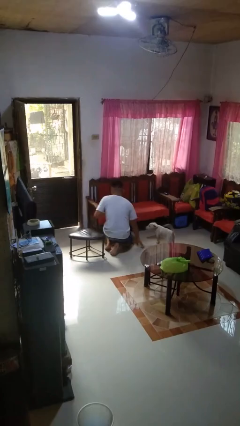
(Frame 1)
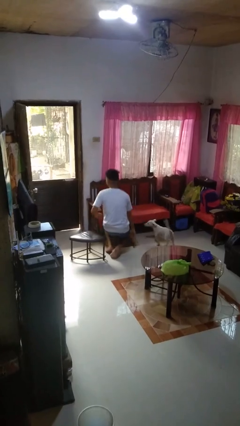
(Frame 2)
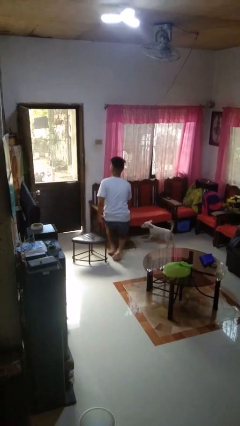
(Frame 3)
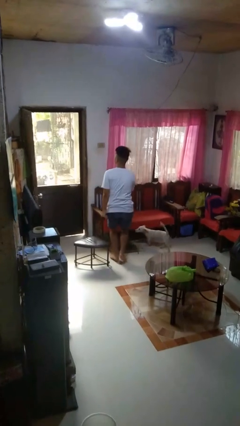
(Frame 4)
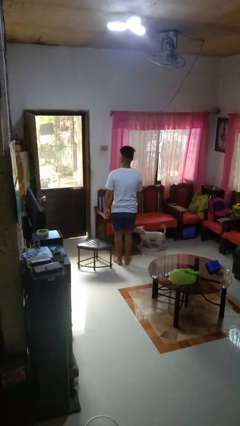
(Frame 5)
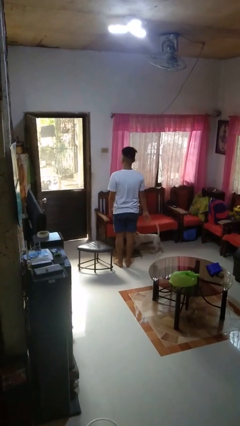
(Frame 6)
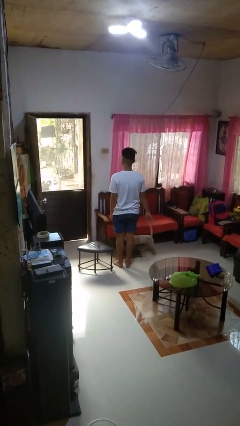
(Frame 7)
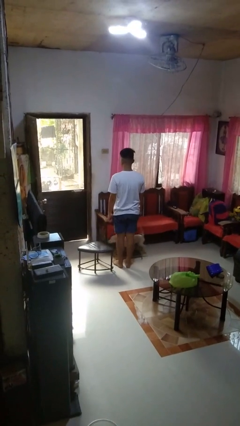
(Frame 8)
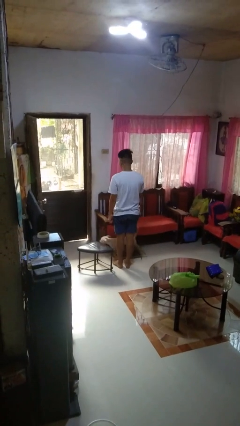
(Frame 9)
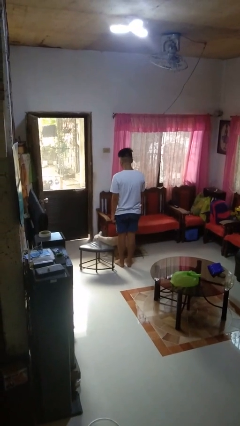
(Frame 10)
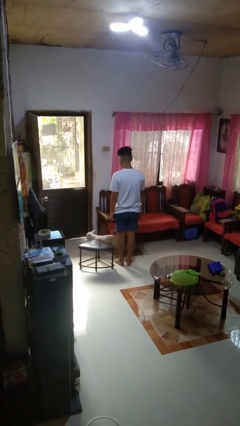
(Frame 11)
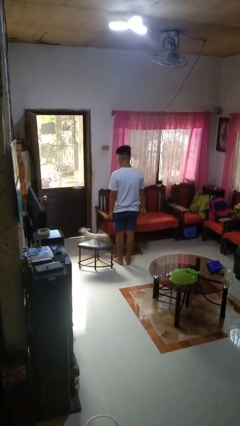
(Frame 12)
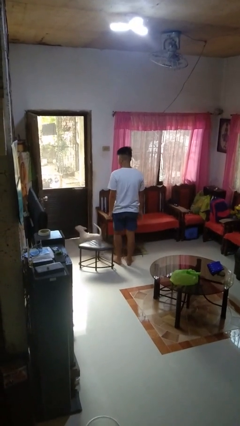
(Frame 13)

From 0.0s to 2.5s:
person stands up from floor

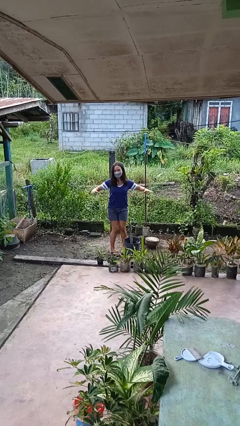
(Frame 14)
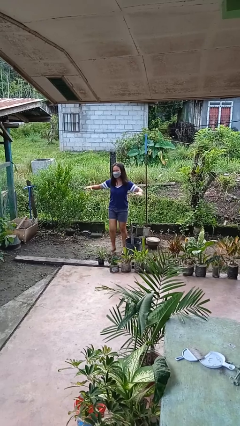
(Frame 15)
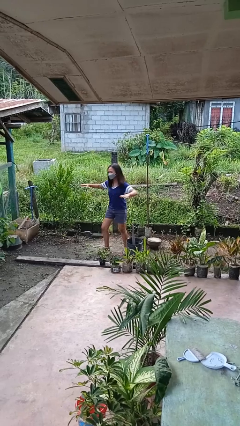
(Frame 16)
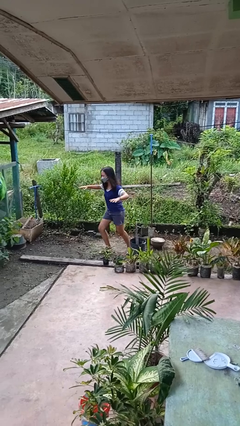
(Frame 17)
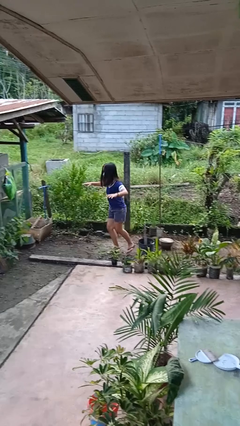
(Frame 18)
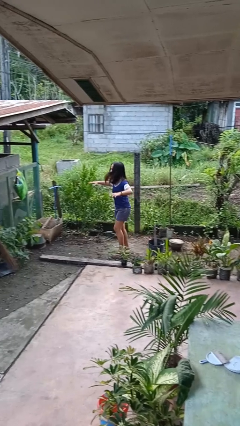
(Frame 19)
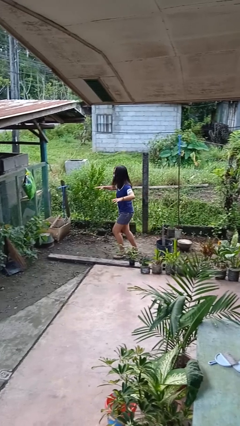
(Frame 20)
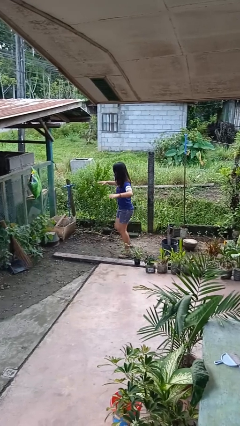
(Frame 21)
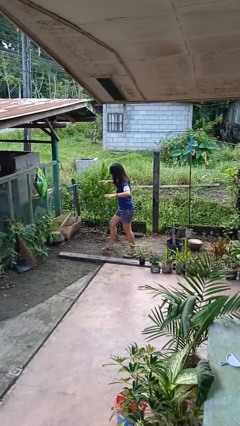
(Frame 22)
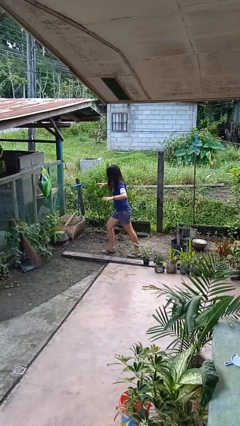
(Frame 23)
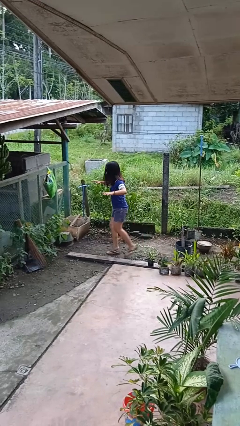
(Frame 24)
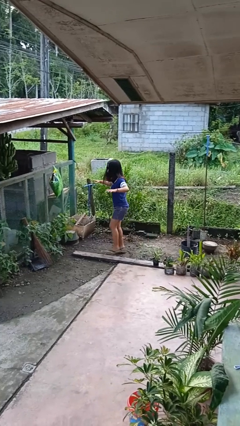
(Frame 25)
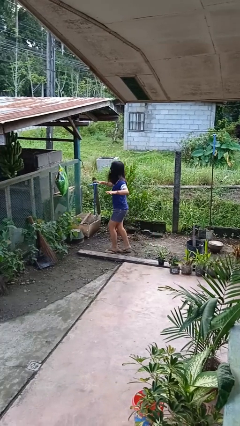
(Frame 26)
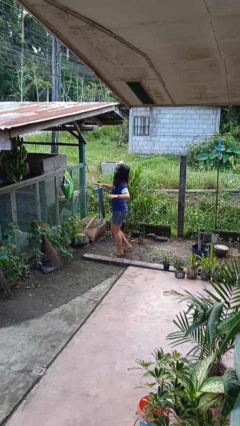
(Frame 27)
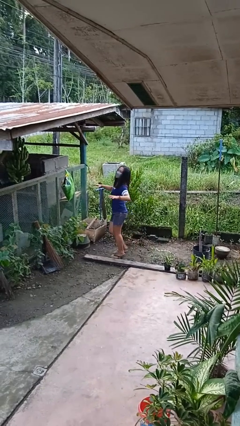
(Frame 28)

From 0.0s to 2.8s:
person walks tiptoe

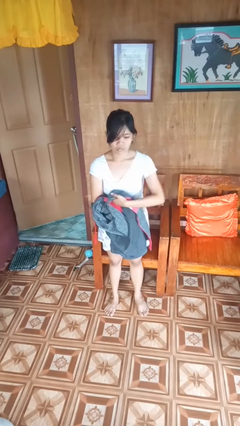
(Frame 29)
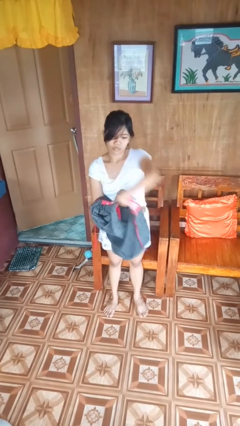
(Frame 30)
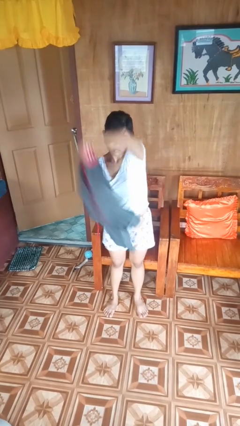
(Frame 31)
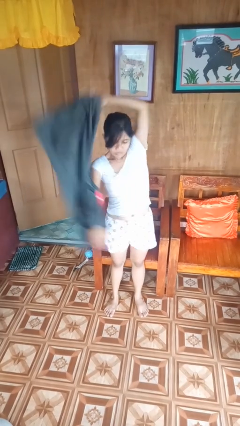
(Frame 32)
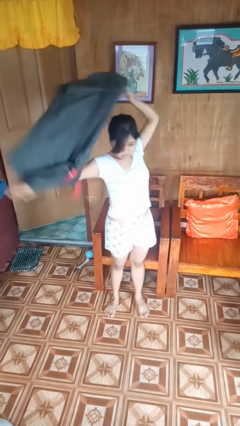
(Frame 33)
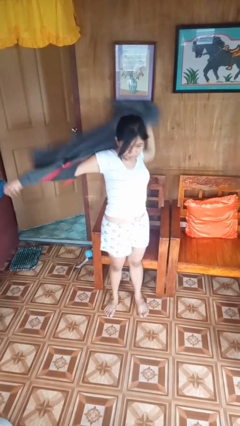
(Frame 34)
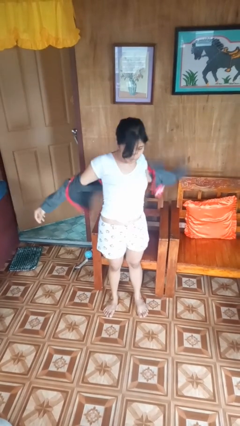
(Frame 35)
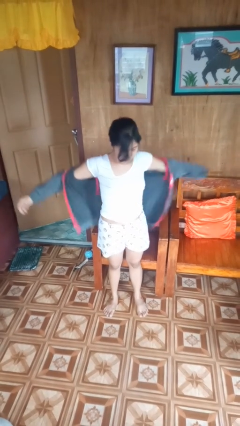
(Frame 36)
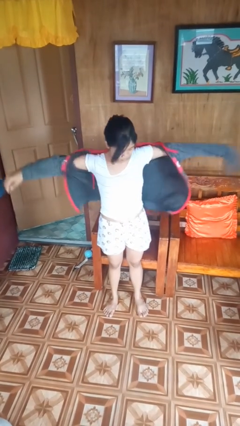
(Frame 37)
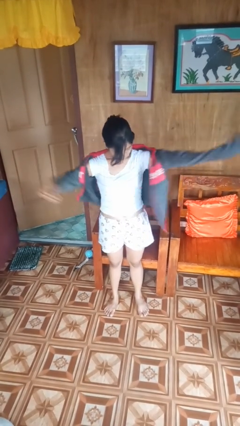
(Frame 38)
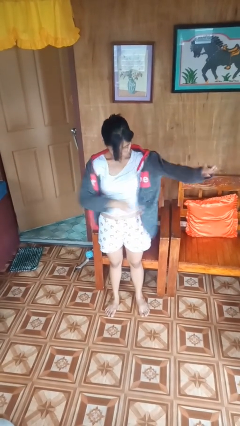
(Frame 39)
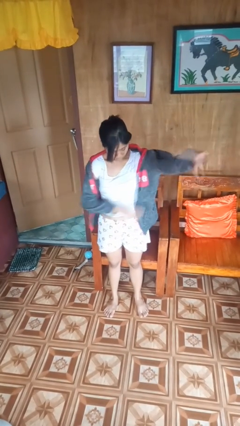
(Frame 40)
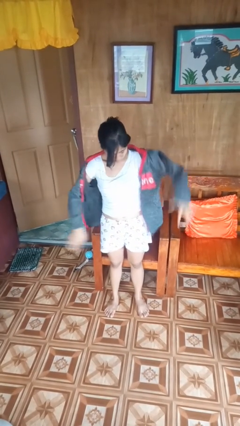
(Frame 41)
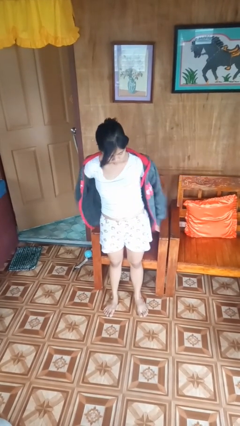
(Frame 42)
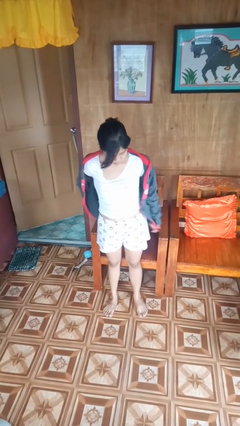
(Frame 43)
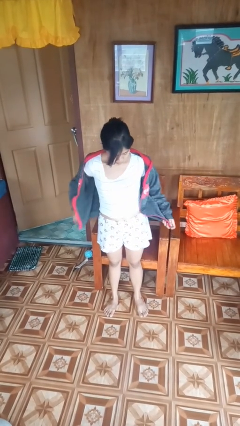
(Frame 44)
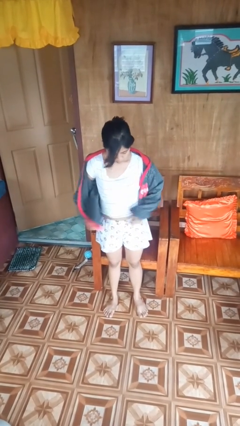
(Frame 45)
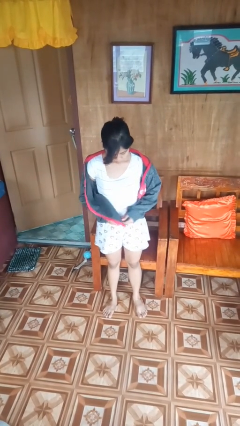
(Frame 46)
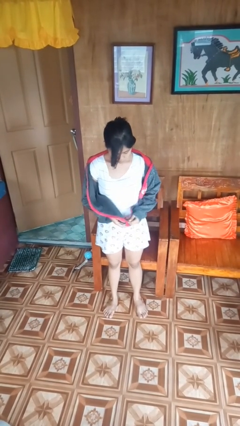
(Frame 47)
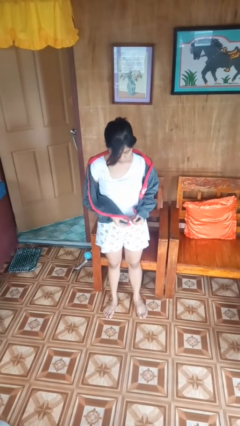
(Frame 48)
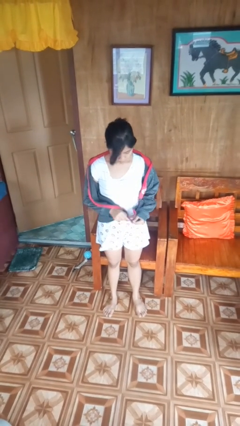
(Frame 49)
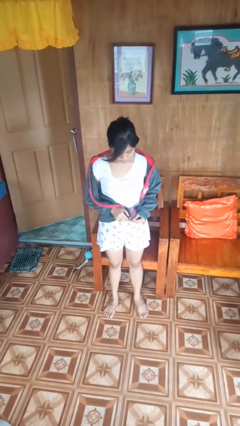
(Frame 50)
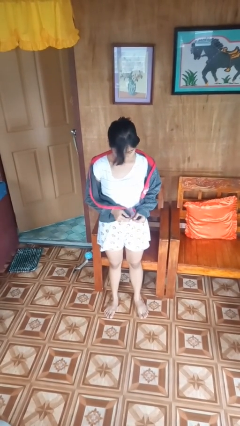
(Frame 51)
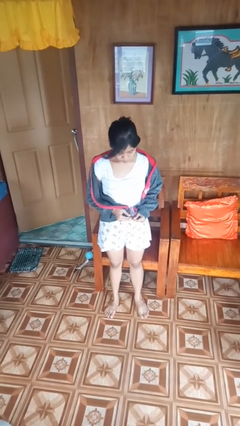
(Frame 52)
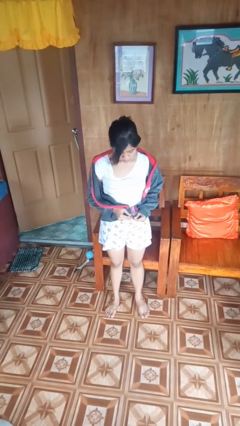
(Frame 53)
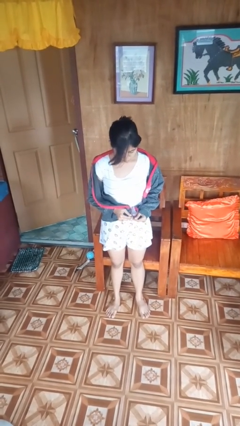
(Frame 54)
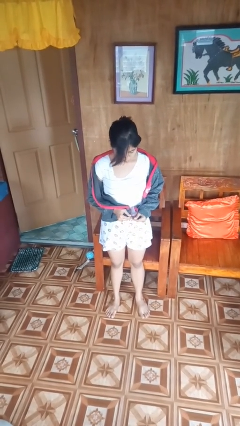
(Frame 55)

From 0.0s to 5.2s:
person puts on jacket

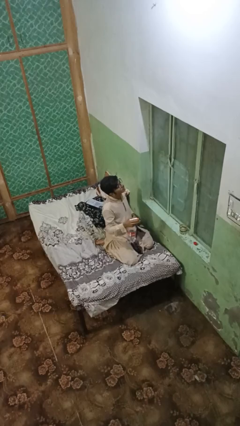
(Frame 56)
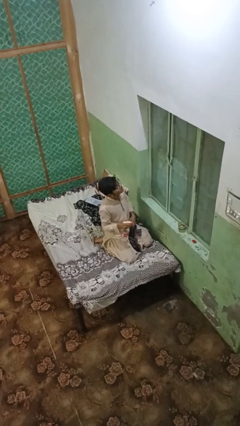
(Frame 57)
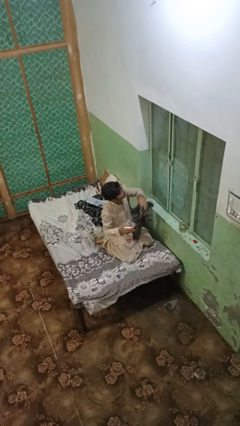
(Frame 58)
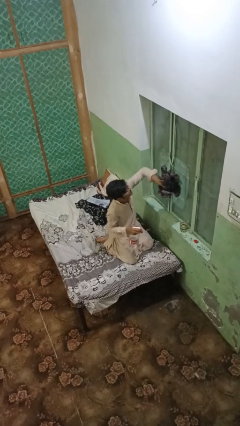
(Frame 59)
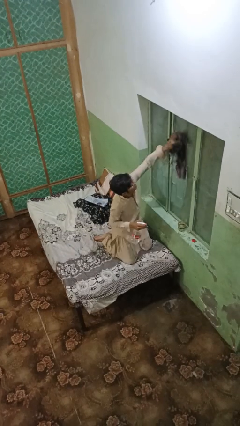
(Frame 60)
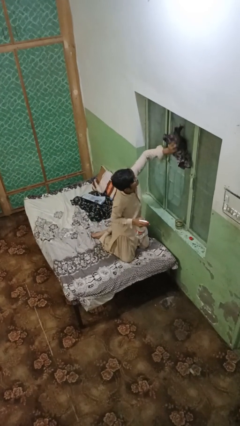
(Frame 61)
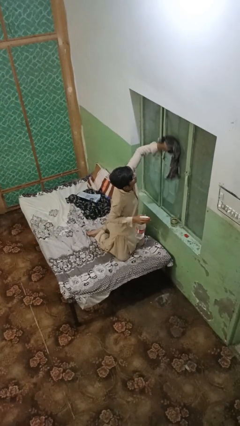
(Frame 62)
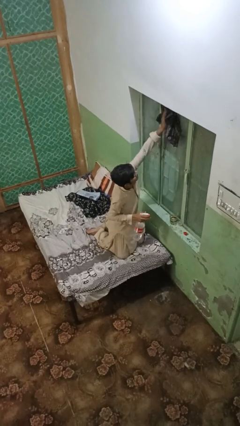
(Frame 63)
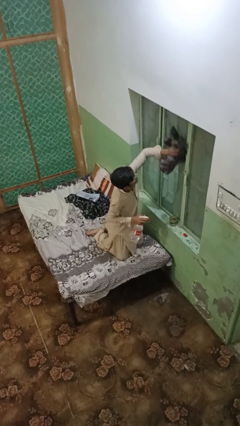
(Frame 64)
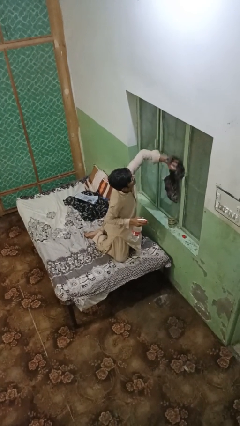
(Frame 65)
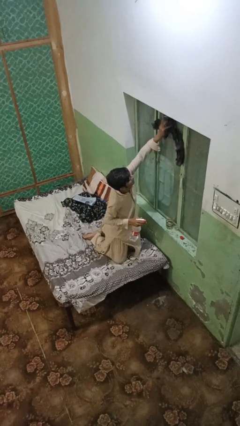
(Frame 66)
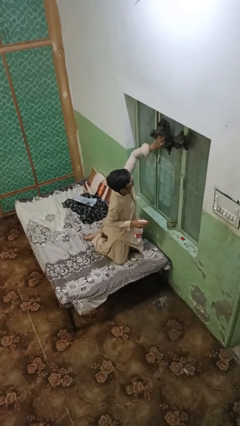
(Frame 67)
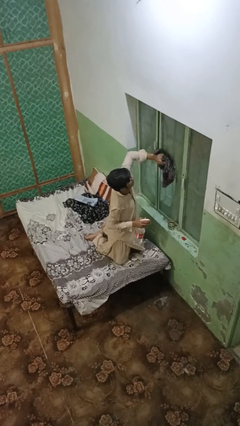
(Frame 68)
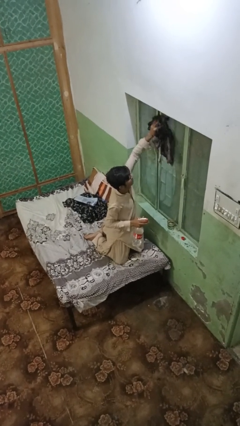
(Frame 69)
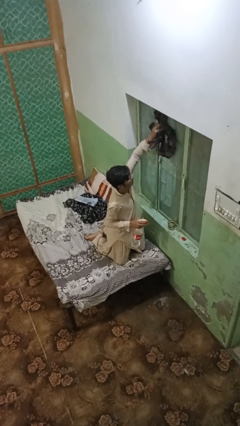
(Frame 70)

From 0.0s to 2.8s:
person washes window

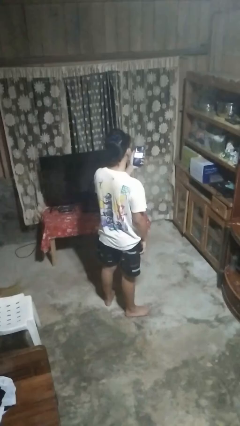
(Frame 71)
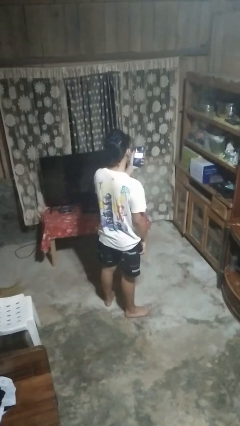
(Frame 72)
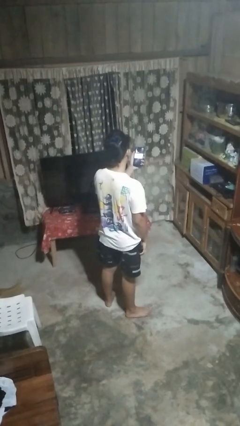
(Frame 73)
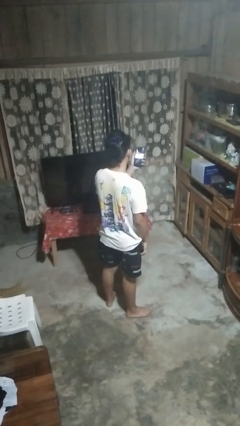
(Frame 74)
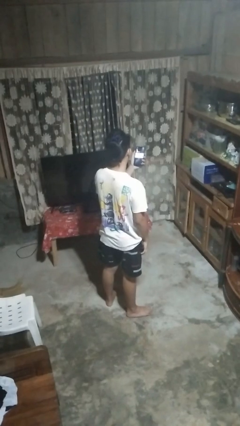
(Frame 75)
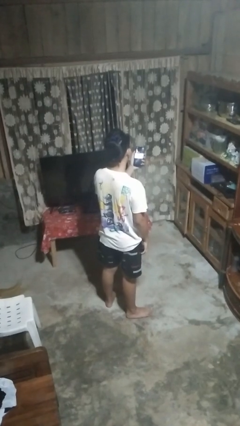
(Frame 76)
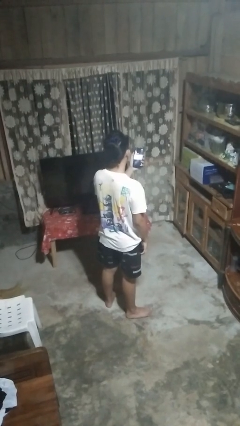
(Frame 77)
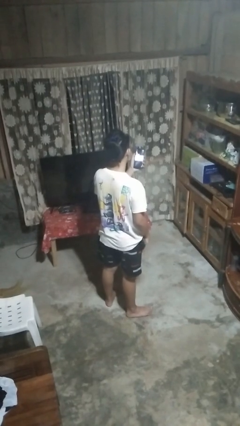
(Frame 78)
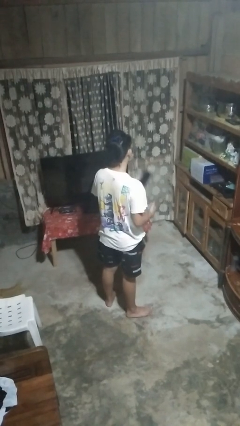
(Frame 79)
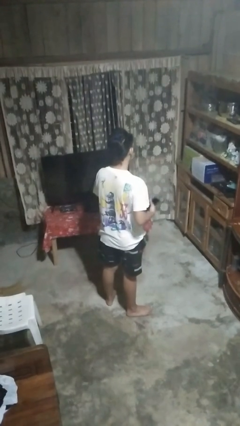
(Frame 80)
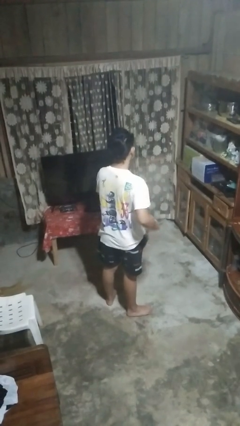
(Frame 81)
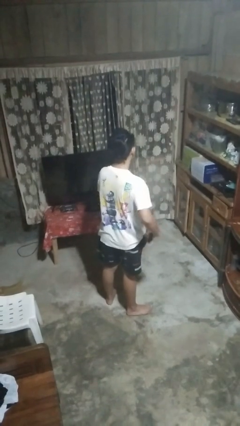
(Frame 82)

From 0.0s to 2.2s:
person puts phone into pocket

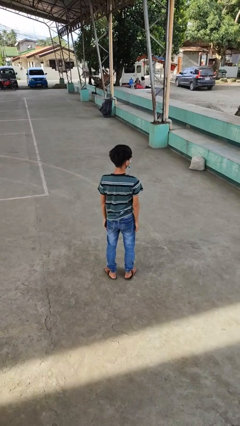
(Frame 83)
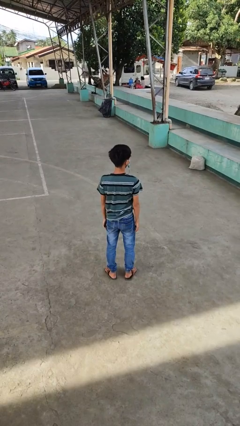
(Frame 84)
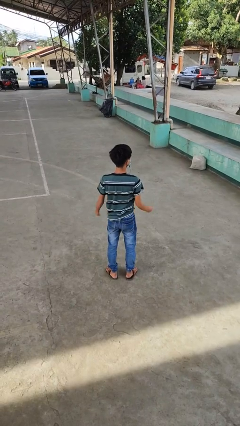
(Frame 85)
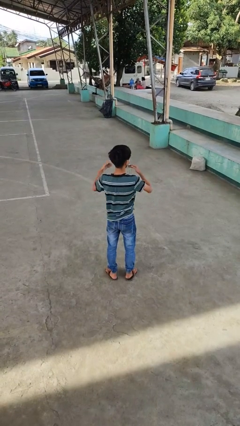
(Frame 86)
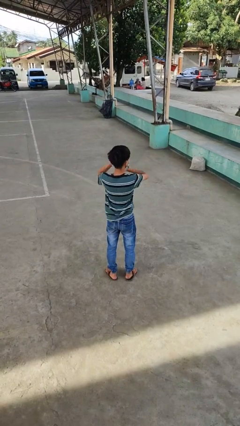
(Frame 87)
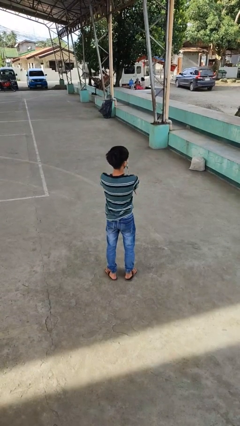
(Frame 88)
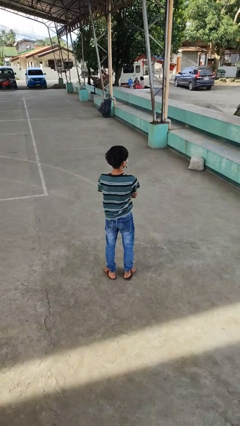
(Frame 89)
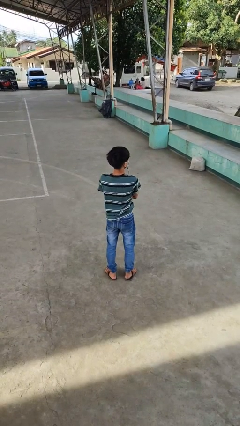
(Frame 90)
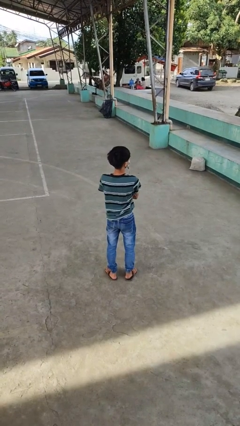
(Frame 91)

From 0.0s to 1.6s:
person crosses arms

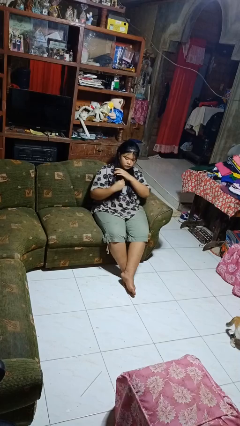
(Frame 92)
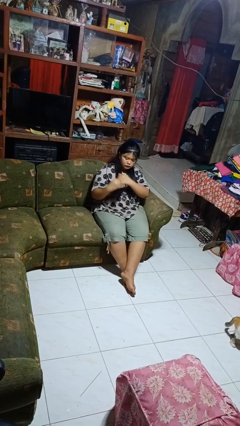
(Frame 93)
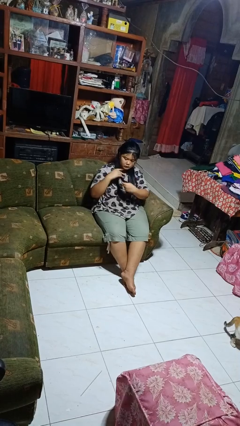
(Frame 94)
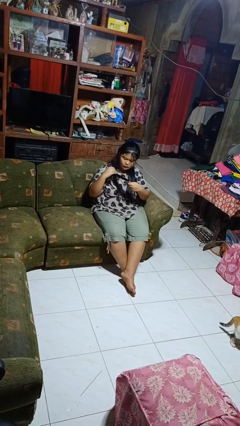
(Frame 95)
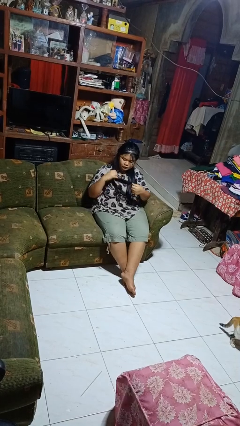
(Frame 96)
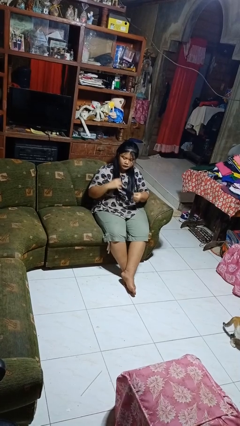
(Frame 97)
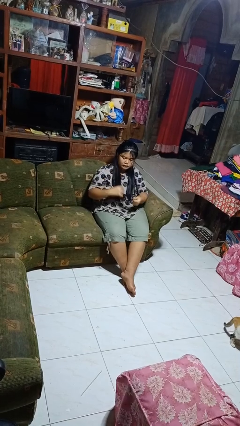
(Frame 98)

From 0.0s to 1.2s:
person strokes hair
